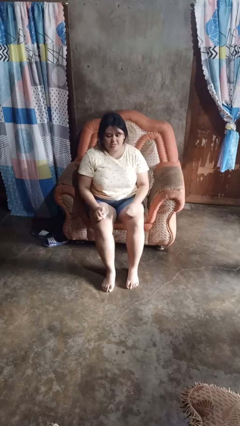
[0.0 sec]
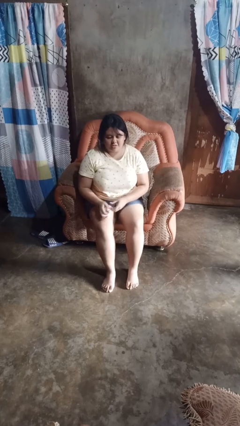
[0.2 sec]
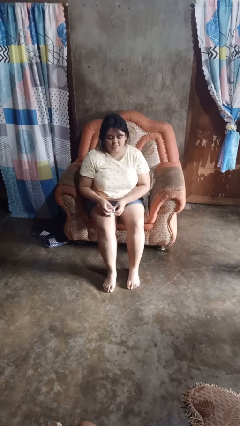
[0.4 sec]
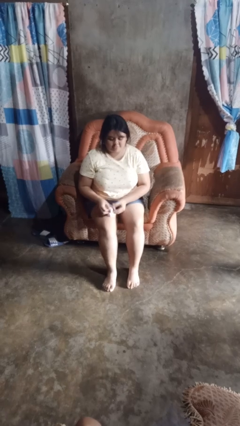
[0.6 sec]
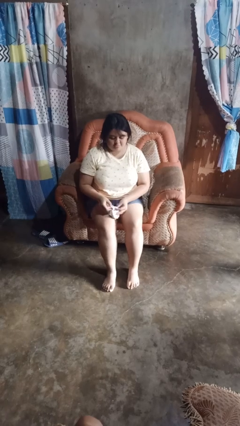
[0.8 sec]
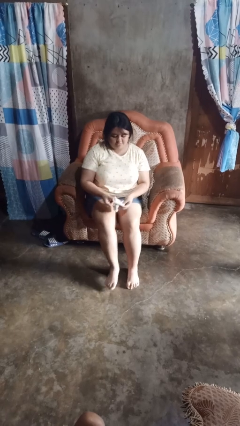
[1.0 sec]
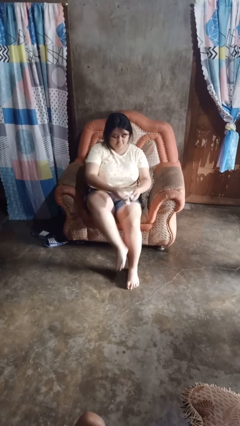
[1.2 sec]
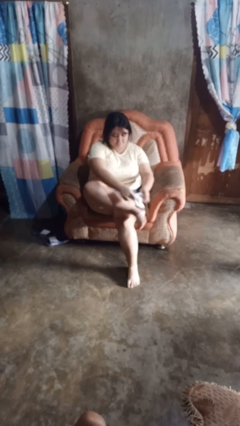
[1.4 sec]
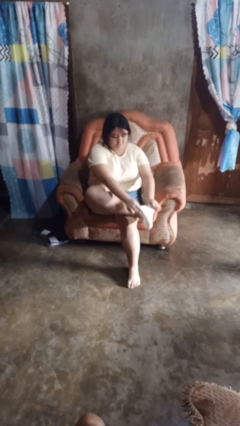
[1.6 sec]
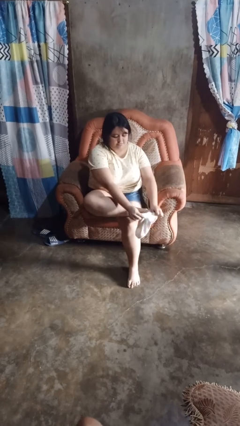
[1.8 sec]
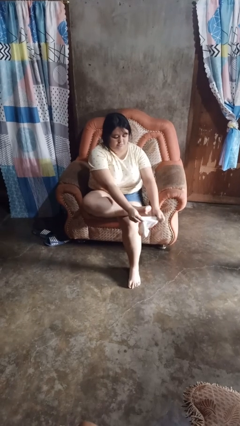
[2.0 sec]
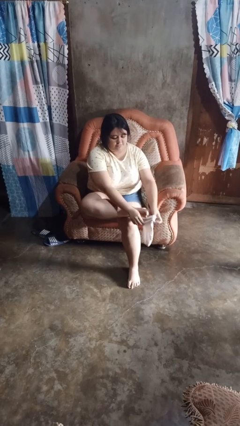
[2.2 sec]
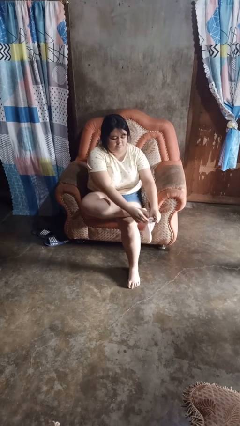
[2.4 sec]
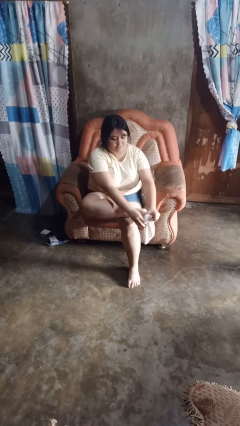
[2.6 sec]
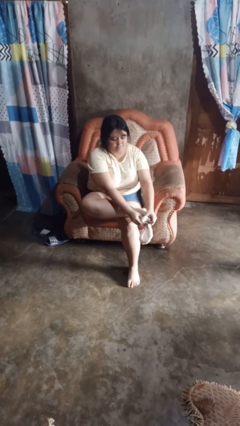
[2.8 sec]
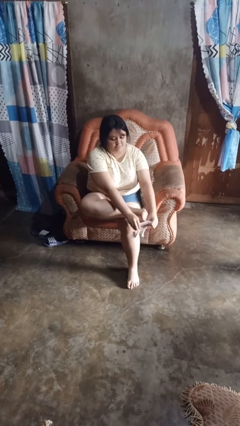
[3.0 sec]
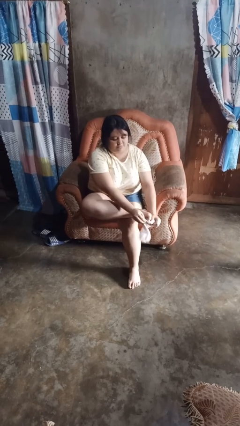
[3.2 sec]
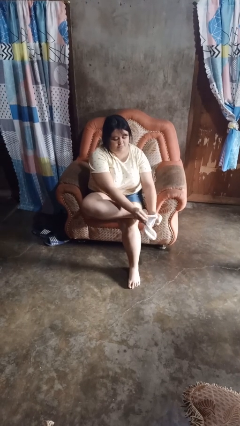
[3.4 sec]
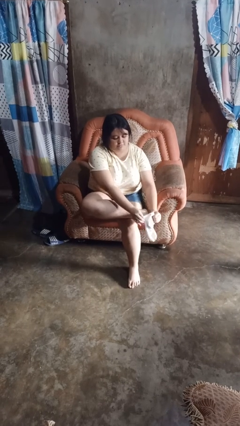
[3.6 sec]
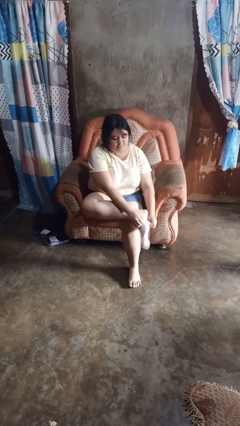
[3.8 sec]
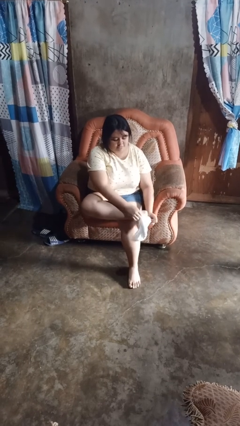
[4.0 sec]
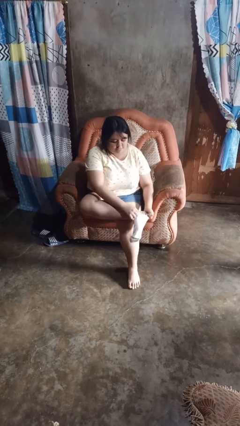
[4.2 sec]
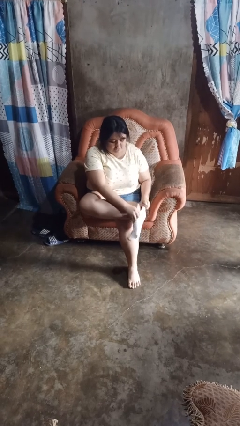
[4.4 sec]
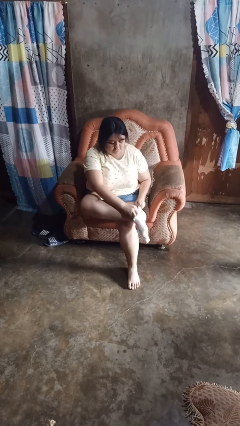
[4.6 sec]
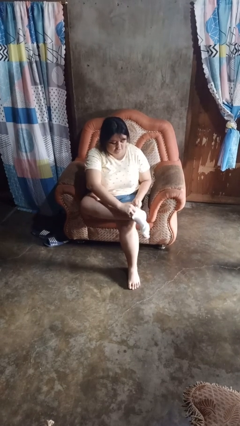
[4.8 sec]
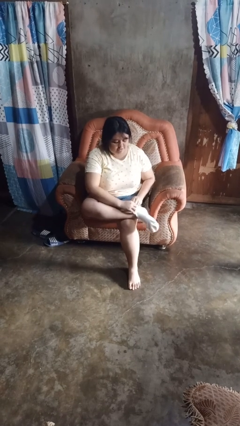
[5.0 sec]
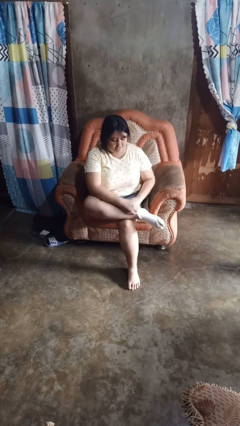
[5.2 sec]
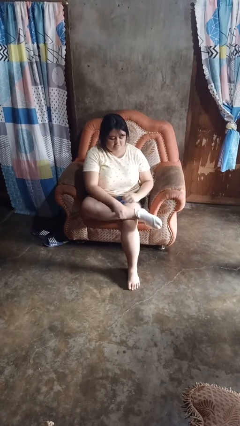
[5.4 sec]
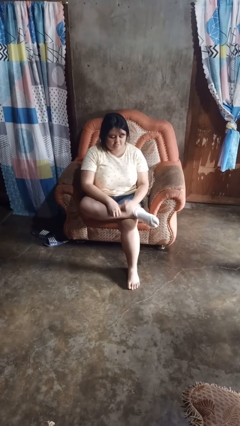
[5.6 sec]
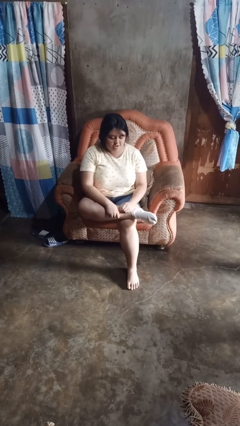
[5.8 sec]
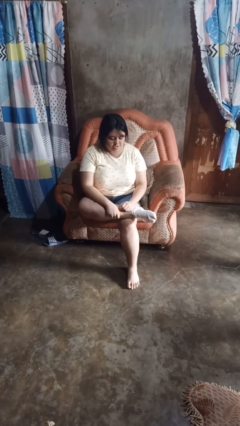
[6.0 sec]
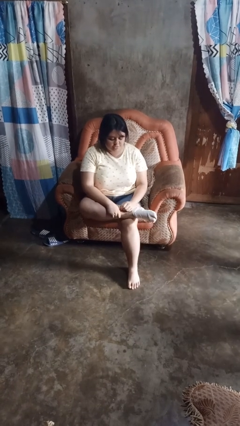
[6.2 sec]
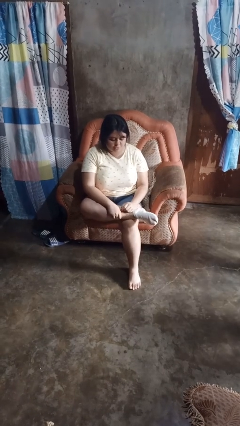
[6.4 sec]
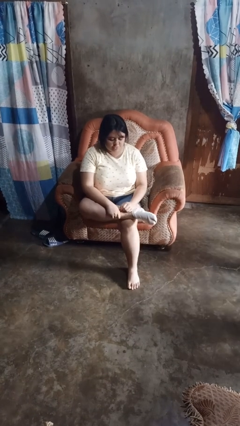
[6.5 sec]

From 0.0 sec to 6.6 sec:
person puts on socks

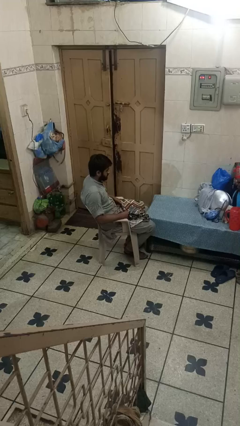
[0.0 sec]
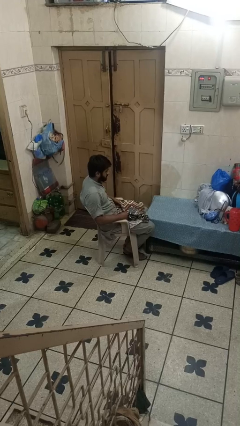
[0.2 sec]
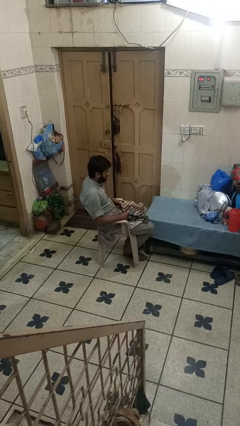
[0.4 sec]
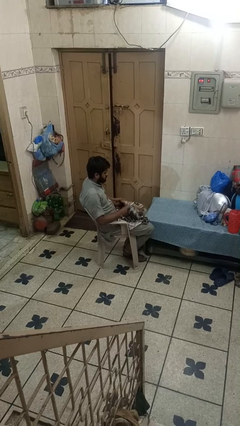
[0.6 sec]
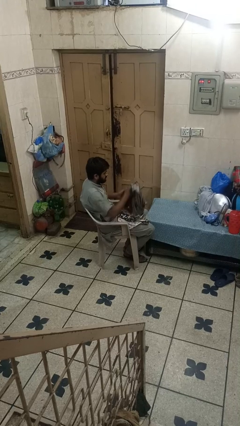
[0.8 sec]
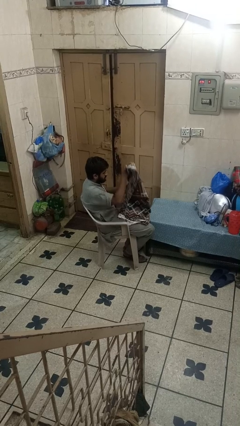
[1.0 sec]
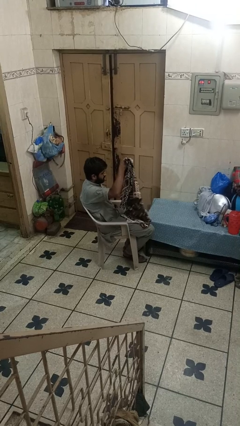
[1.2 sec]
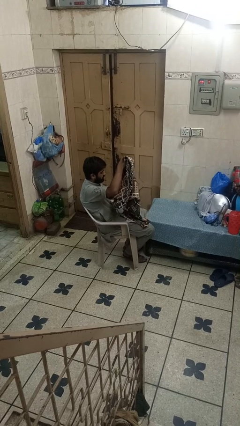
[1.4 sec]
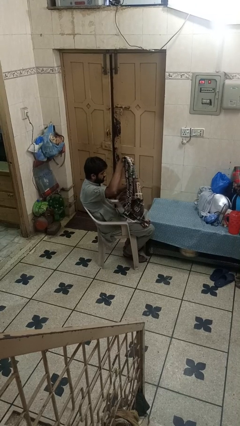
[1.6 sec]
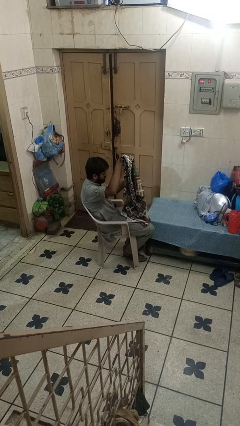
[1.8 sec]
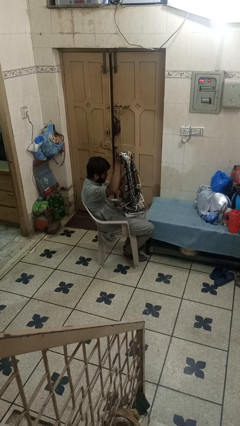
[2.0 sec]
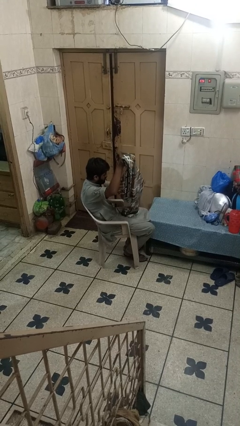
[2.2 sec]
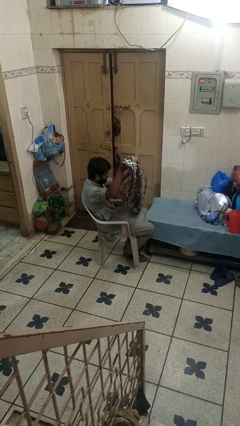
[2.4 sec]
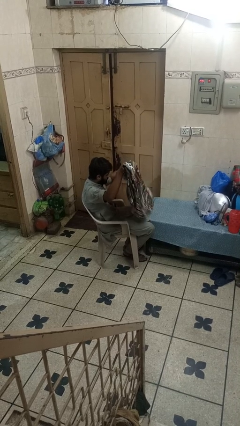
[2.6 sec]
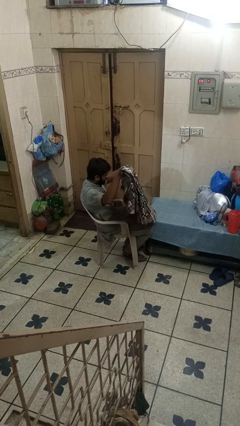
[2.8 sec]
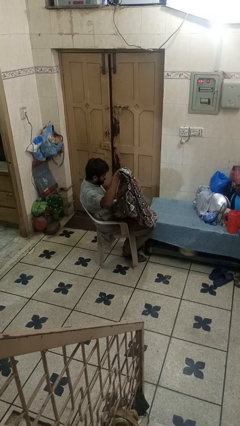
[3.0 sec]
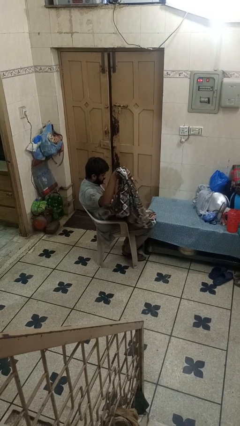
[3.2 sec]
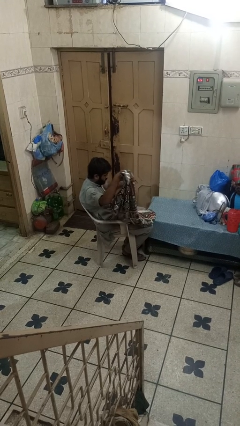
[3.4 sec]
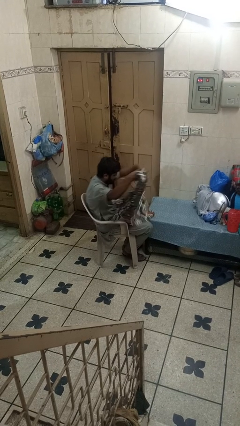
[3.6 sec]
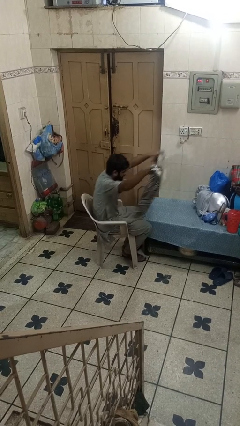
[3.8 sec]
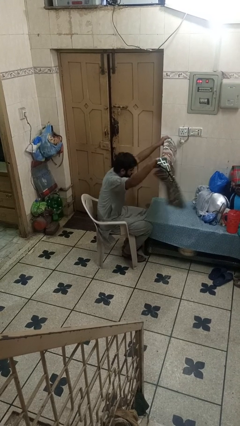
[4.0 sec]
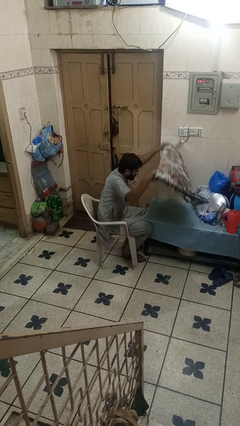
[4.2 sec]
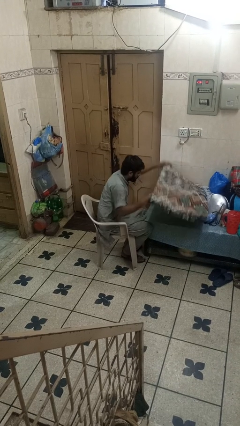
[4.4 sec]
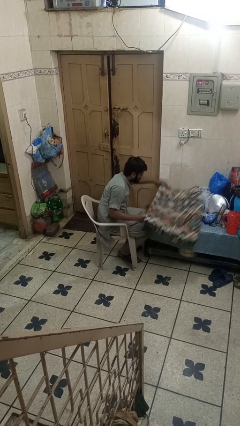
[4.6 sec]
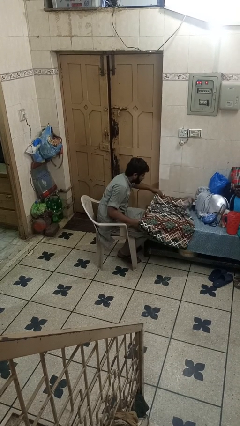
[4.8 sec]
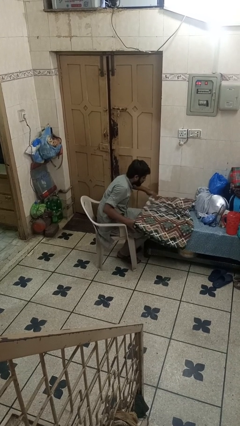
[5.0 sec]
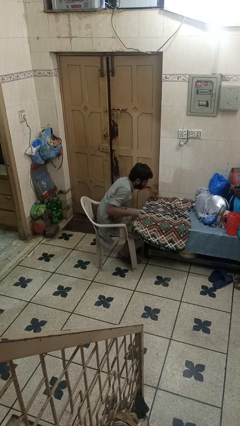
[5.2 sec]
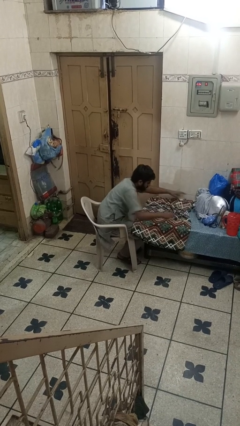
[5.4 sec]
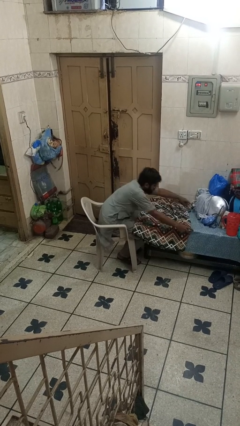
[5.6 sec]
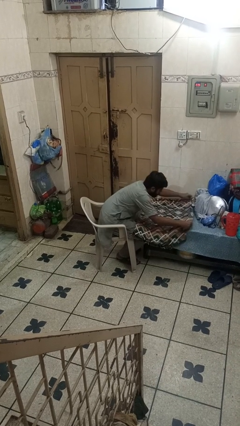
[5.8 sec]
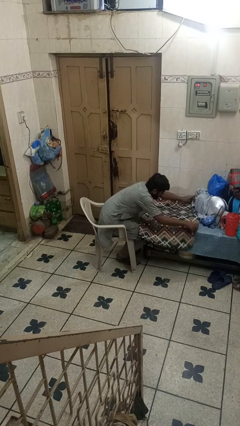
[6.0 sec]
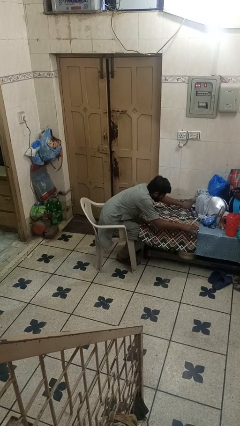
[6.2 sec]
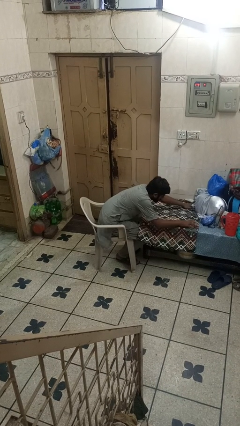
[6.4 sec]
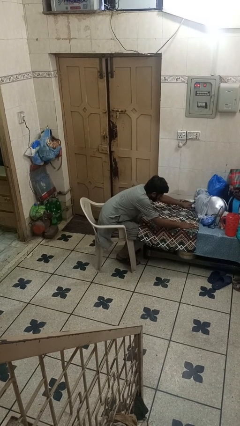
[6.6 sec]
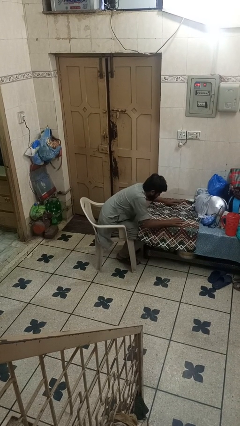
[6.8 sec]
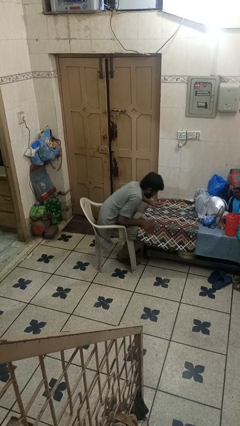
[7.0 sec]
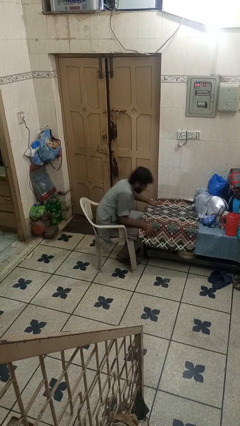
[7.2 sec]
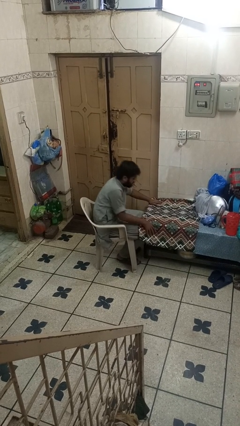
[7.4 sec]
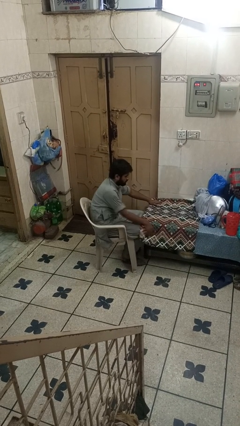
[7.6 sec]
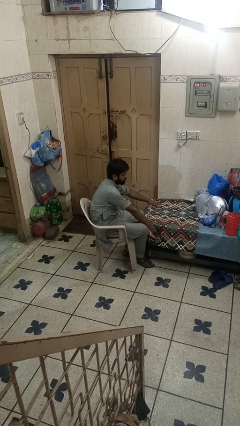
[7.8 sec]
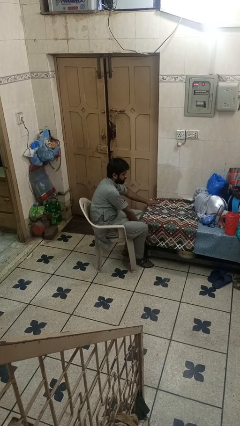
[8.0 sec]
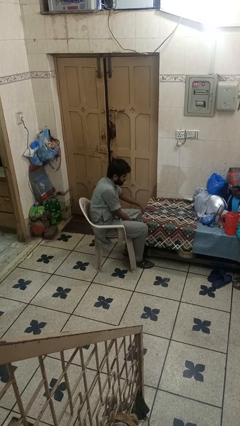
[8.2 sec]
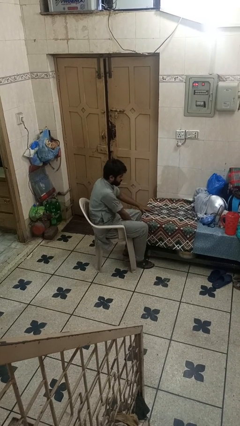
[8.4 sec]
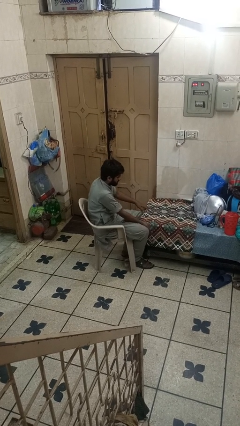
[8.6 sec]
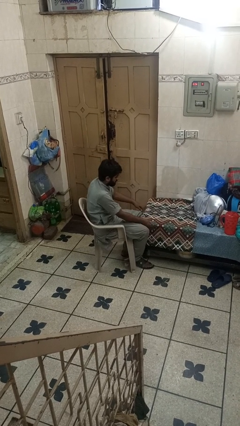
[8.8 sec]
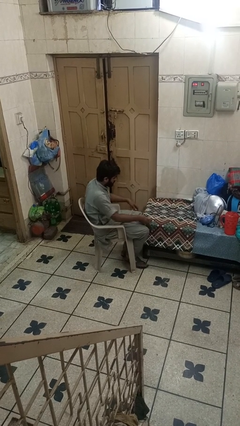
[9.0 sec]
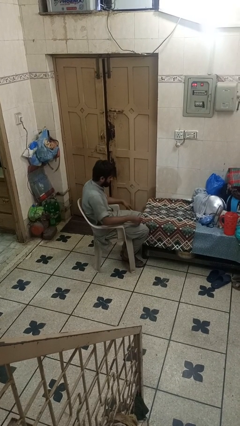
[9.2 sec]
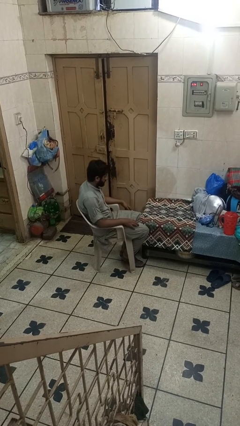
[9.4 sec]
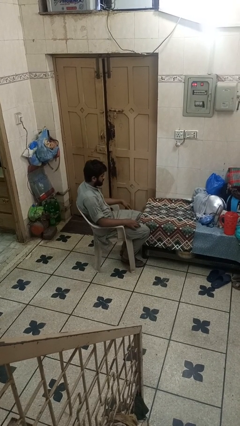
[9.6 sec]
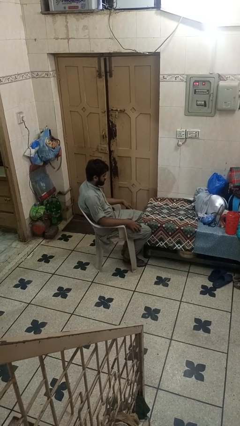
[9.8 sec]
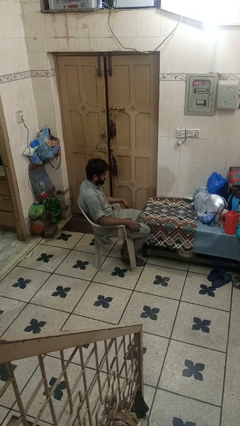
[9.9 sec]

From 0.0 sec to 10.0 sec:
person spreads tablecloth

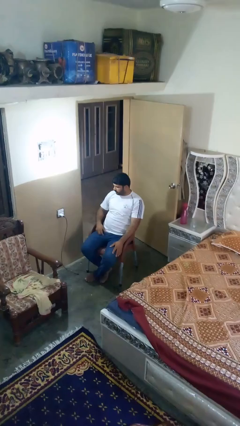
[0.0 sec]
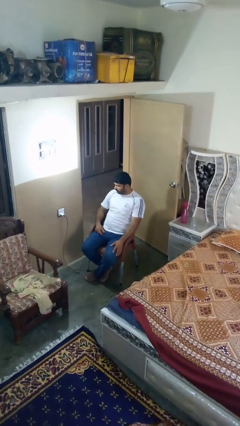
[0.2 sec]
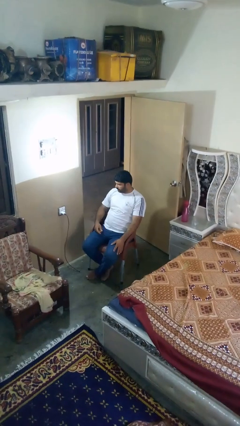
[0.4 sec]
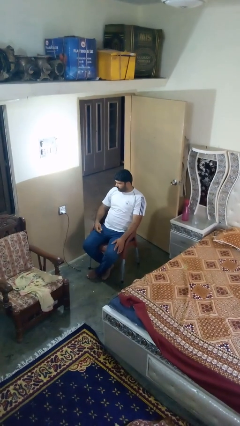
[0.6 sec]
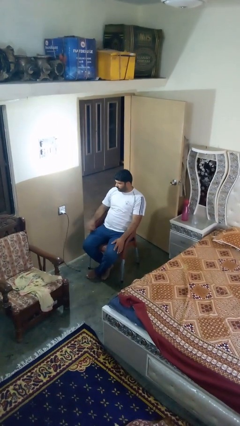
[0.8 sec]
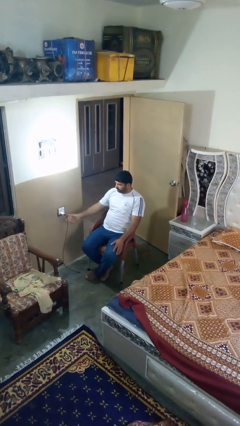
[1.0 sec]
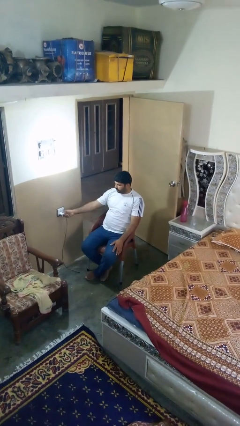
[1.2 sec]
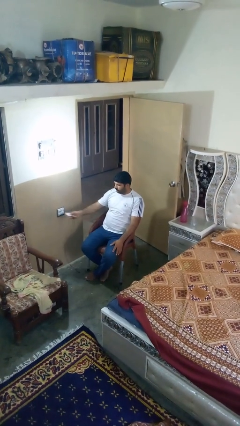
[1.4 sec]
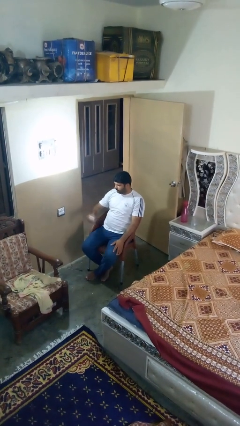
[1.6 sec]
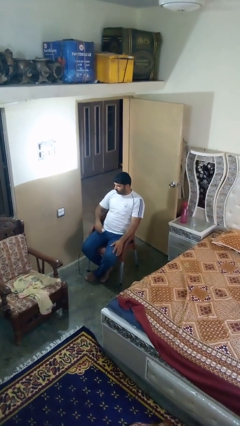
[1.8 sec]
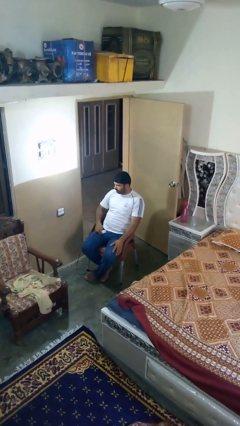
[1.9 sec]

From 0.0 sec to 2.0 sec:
person unplugs from electrical socket
